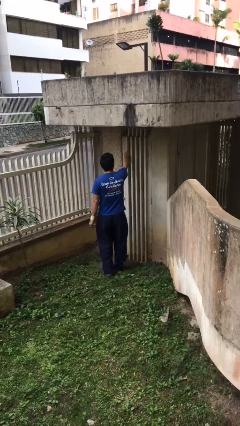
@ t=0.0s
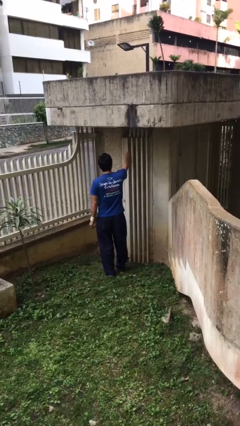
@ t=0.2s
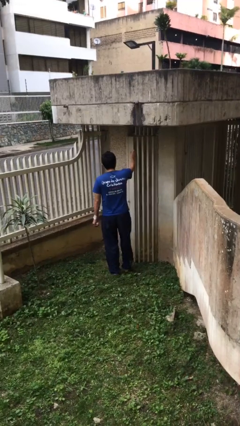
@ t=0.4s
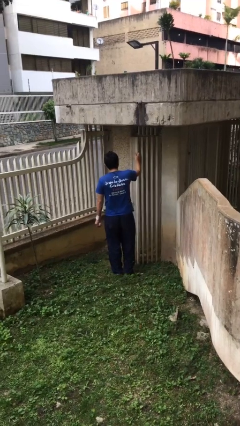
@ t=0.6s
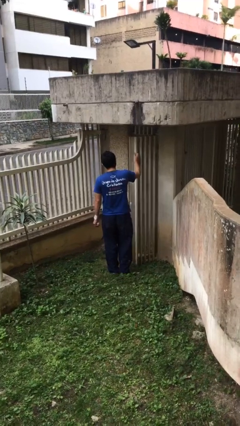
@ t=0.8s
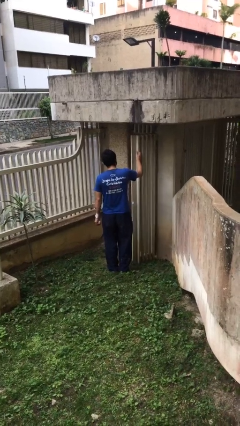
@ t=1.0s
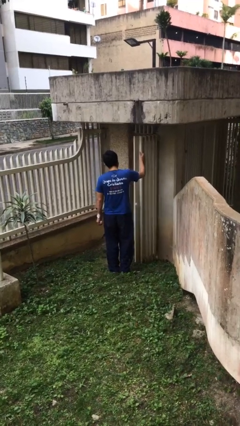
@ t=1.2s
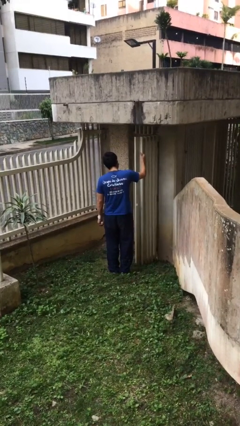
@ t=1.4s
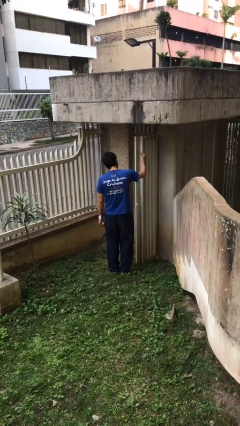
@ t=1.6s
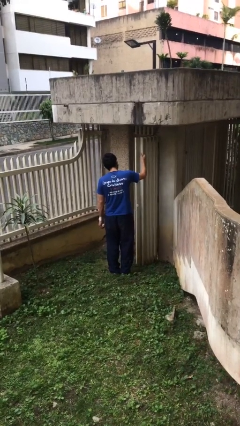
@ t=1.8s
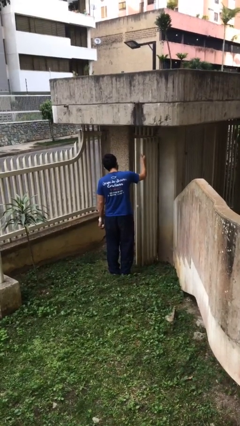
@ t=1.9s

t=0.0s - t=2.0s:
person opens facility door

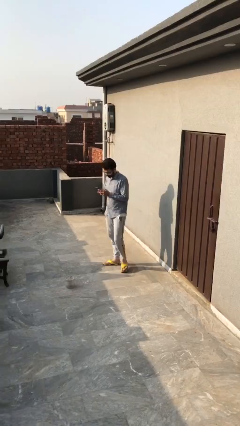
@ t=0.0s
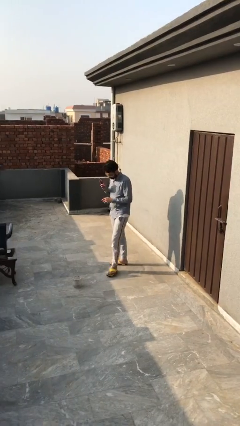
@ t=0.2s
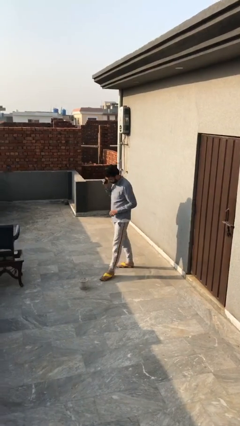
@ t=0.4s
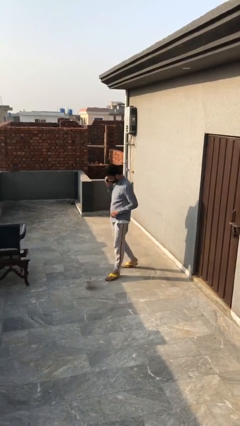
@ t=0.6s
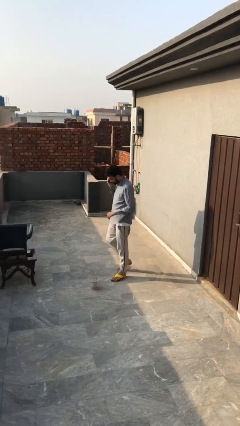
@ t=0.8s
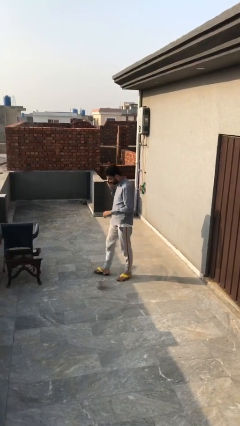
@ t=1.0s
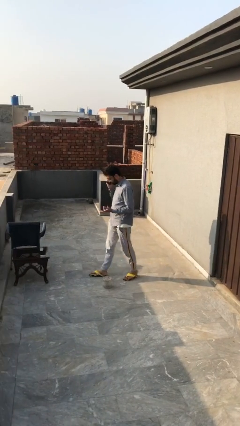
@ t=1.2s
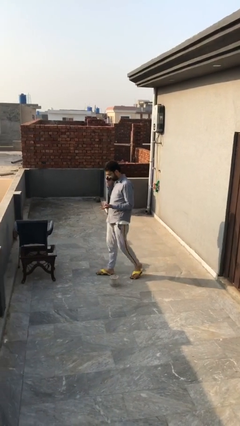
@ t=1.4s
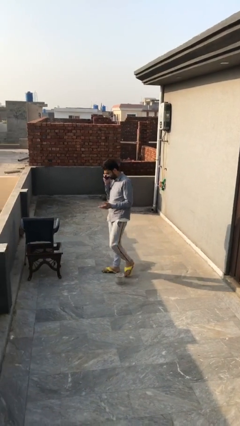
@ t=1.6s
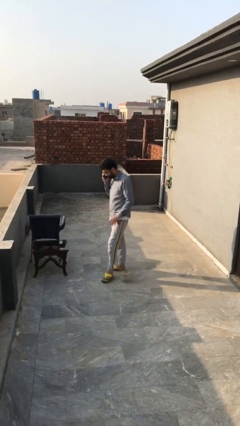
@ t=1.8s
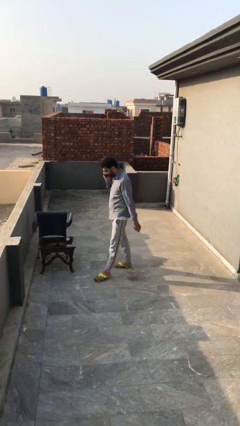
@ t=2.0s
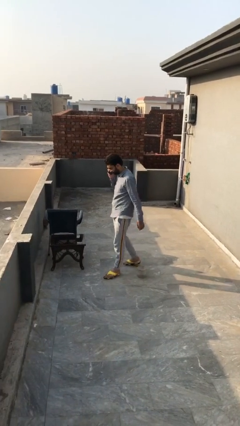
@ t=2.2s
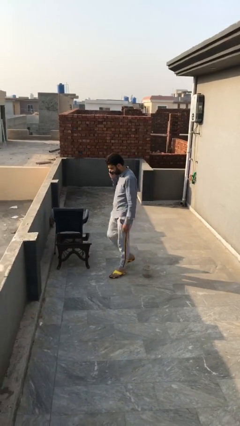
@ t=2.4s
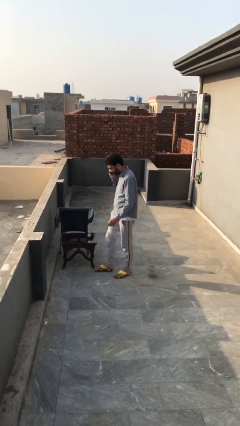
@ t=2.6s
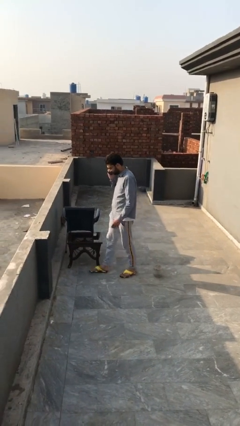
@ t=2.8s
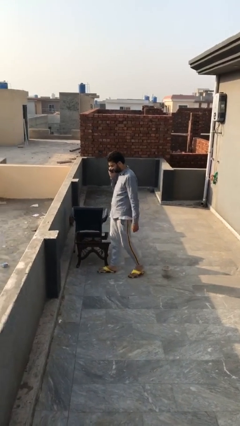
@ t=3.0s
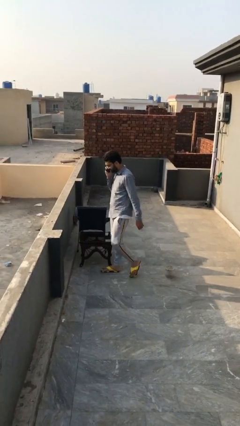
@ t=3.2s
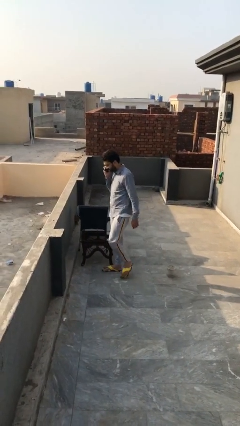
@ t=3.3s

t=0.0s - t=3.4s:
person talks on phone

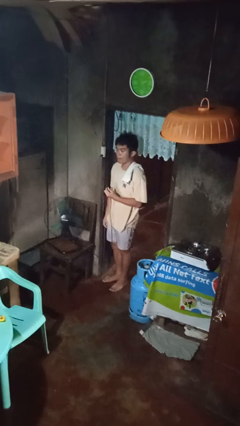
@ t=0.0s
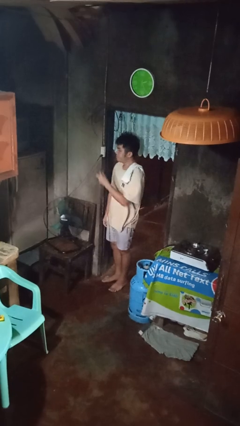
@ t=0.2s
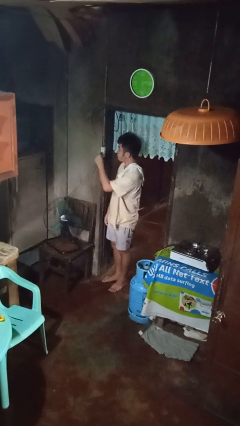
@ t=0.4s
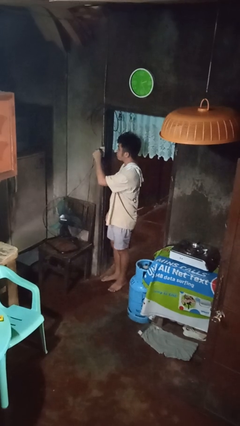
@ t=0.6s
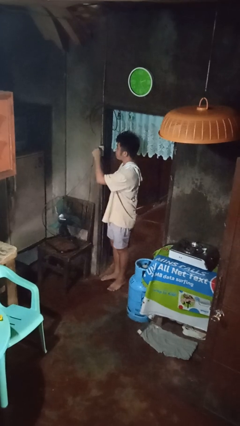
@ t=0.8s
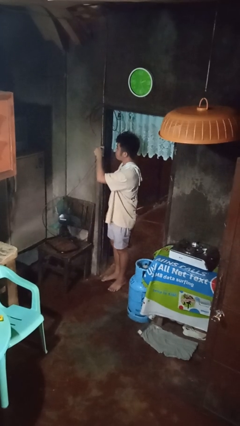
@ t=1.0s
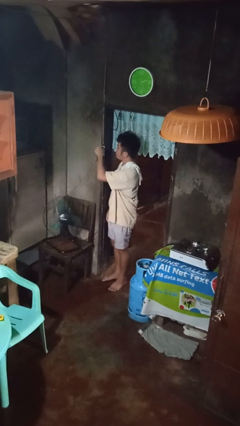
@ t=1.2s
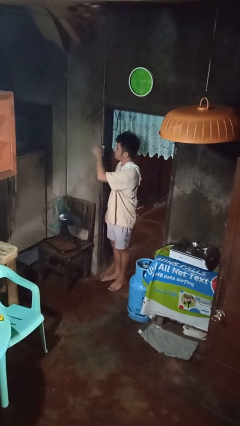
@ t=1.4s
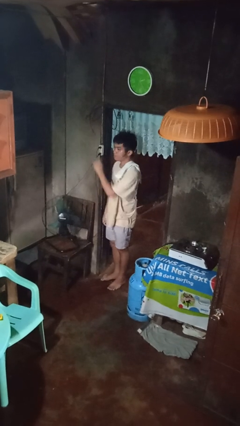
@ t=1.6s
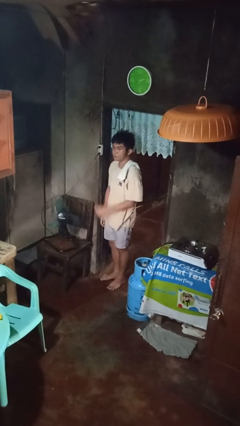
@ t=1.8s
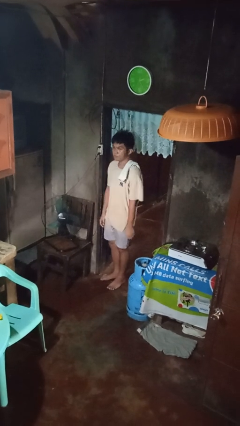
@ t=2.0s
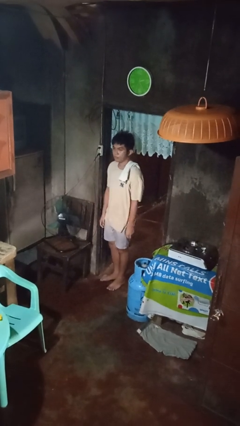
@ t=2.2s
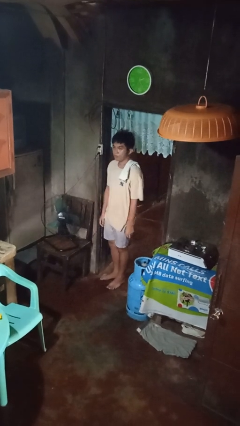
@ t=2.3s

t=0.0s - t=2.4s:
person plugs into electrical socket

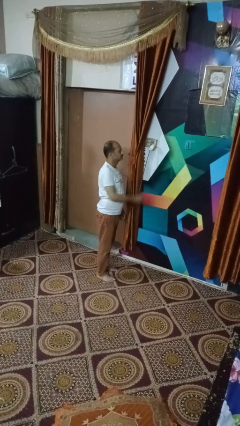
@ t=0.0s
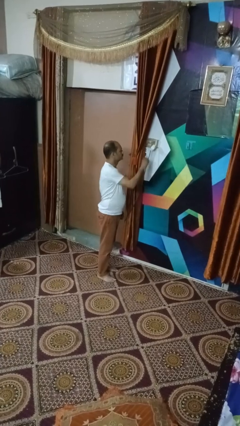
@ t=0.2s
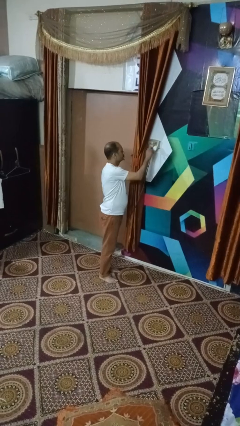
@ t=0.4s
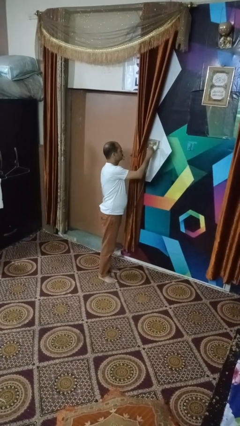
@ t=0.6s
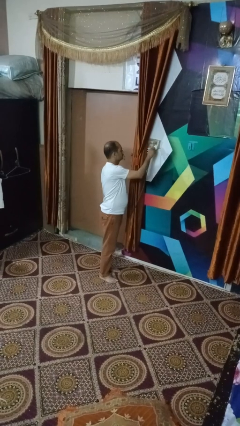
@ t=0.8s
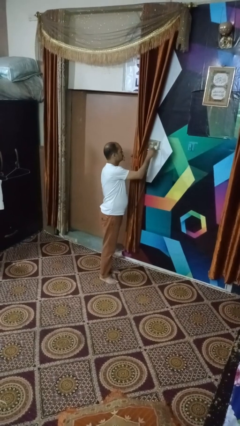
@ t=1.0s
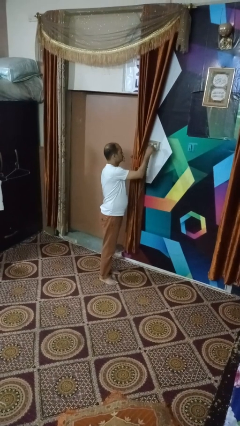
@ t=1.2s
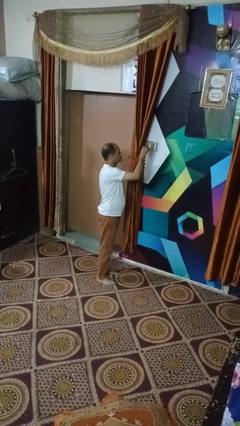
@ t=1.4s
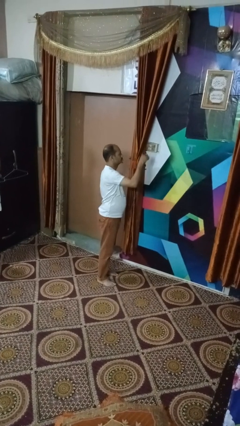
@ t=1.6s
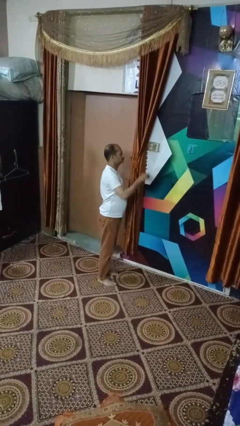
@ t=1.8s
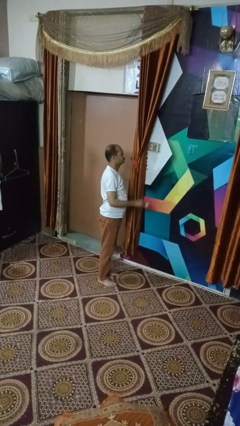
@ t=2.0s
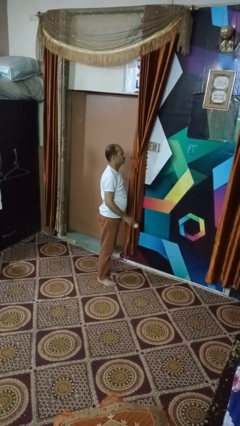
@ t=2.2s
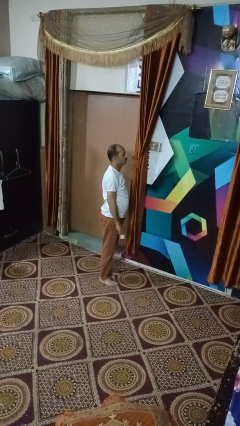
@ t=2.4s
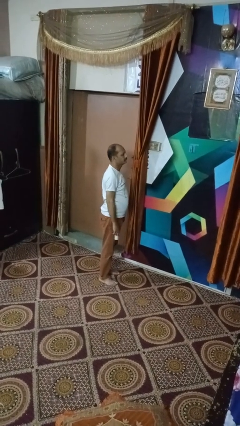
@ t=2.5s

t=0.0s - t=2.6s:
person unplugs from electrical socket

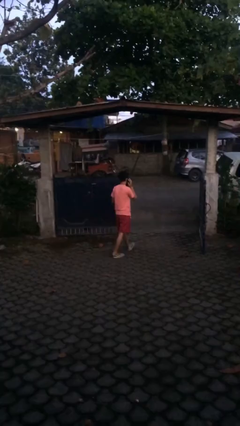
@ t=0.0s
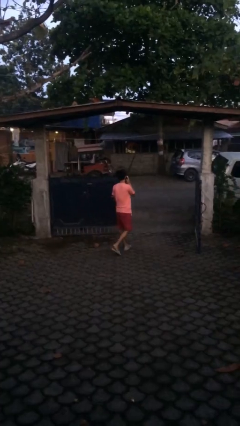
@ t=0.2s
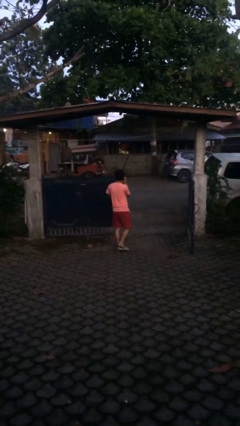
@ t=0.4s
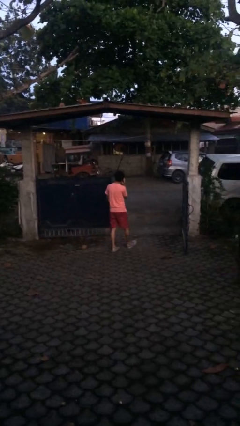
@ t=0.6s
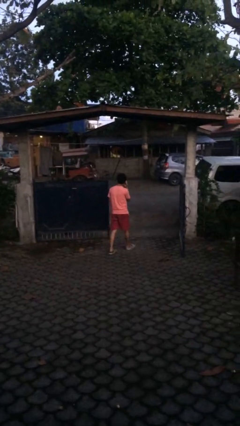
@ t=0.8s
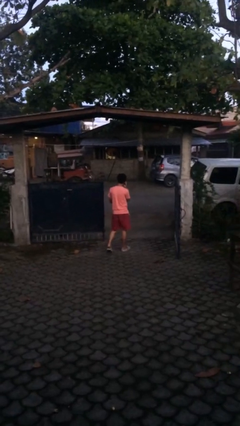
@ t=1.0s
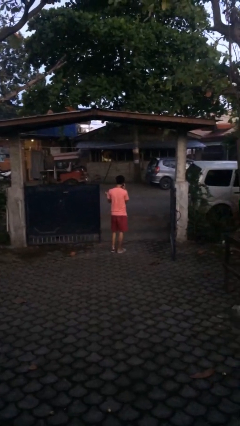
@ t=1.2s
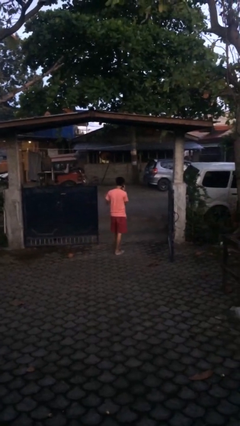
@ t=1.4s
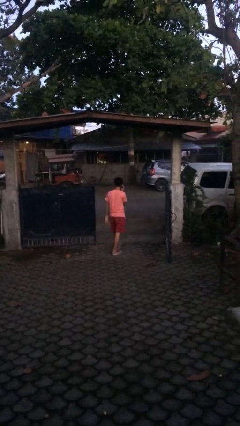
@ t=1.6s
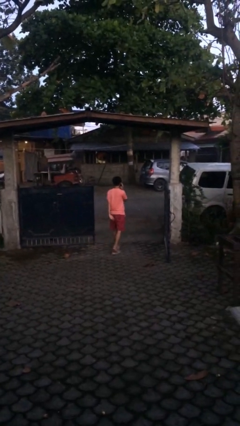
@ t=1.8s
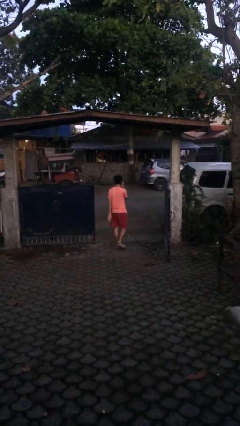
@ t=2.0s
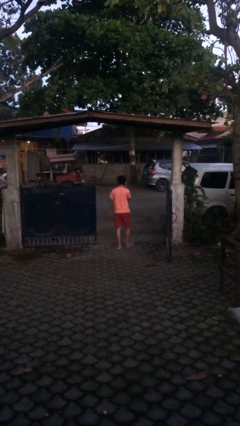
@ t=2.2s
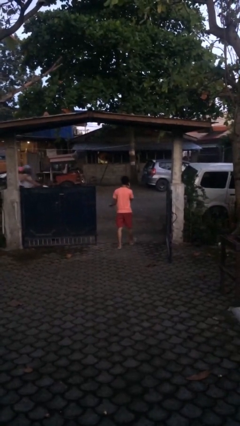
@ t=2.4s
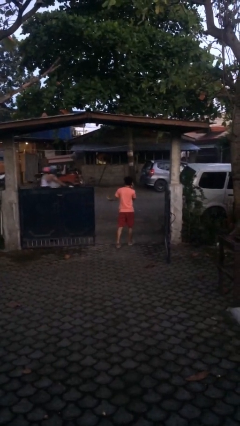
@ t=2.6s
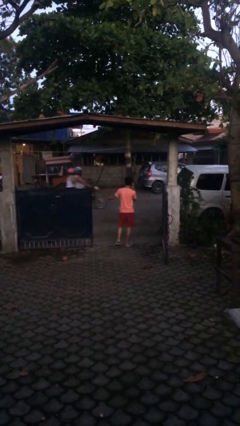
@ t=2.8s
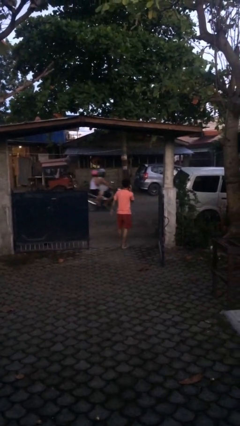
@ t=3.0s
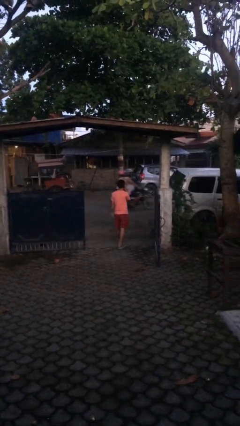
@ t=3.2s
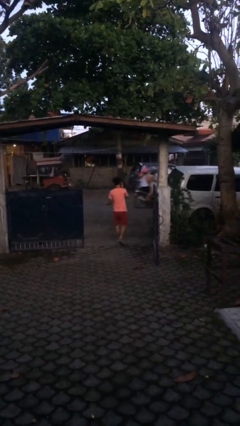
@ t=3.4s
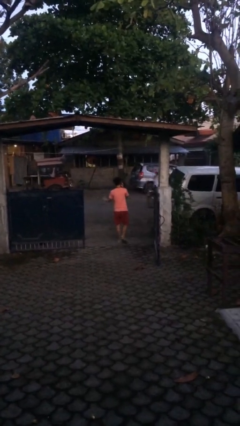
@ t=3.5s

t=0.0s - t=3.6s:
person exits scene through structure

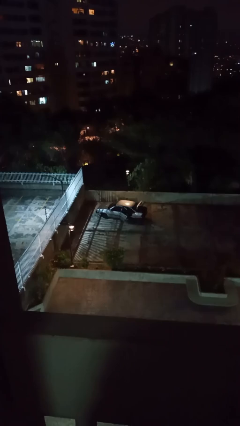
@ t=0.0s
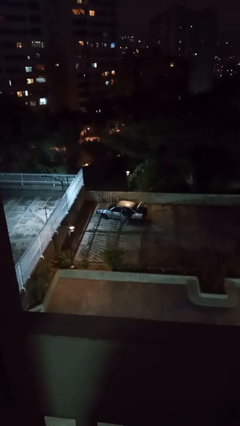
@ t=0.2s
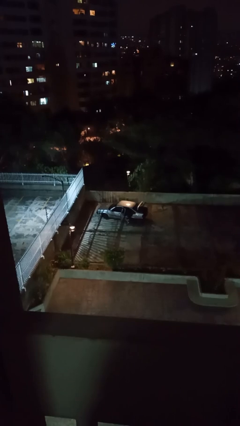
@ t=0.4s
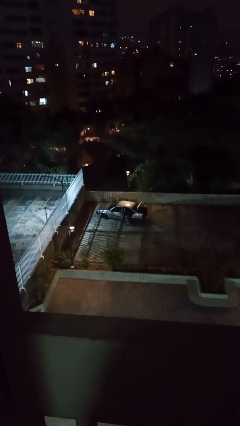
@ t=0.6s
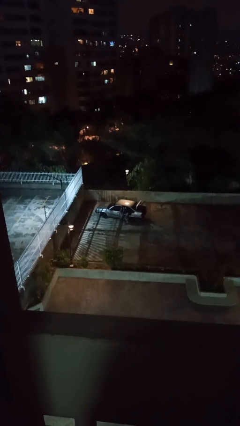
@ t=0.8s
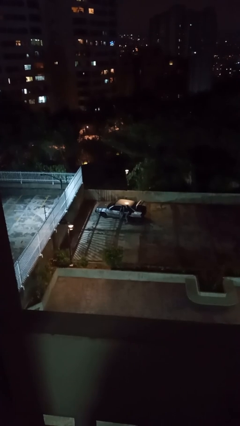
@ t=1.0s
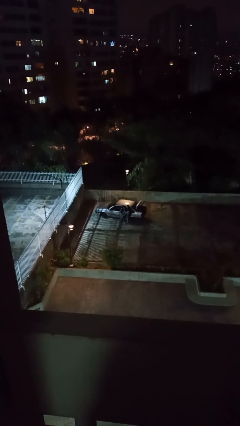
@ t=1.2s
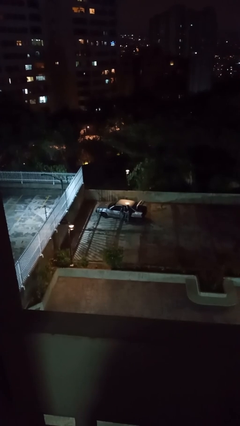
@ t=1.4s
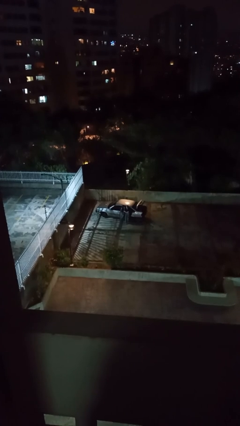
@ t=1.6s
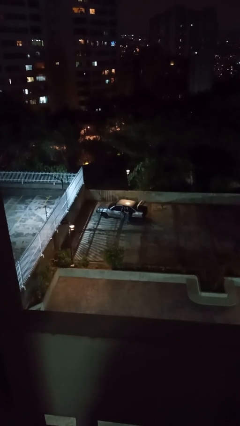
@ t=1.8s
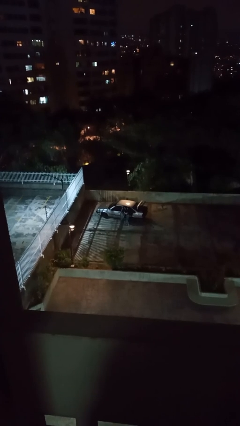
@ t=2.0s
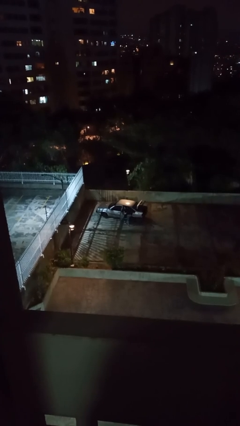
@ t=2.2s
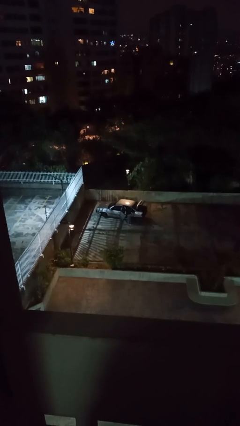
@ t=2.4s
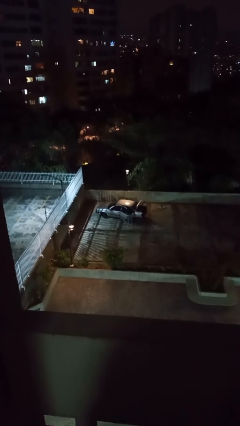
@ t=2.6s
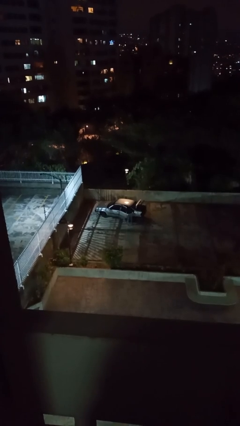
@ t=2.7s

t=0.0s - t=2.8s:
car drops off person

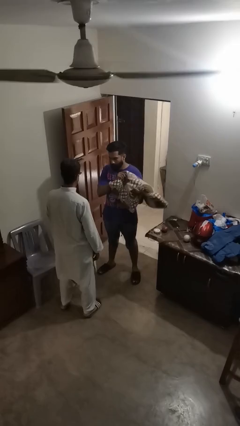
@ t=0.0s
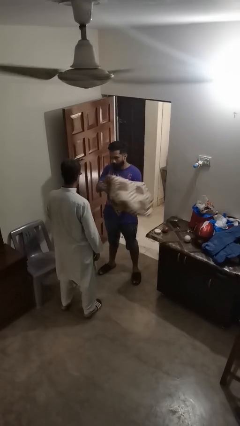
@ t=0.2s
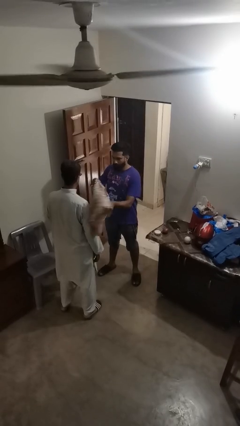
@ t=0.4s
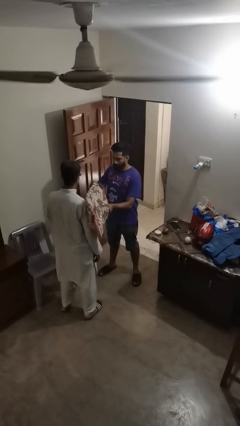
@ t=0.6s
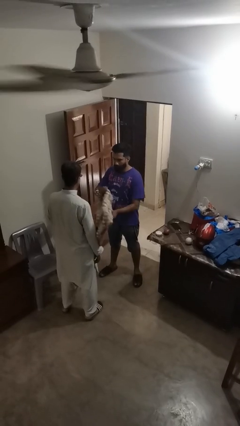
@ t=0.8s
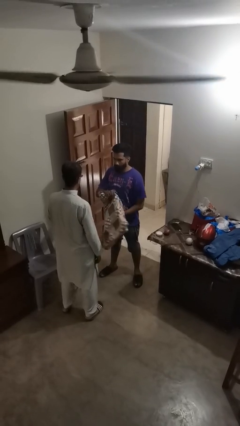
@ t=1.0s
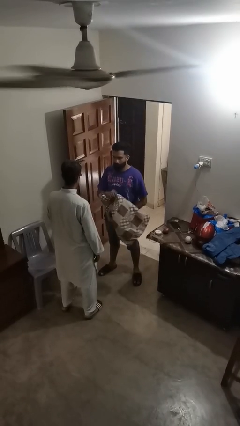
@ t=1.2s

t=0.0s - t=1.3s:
person hits person with pillow
